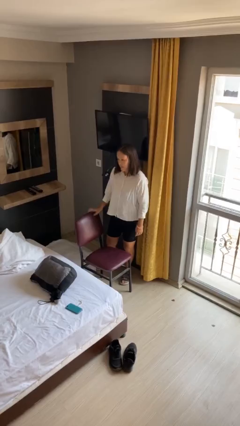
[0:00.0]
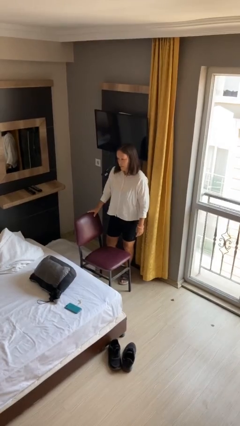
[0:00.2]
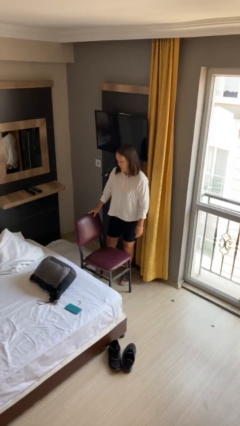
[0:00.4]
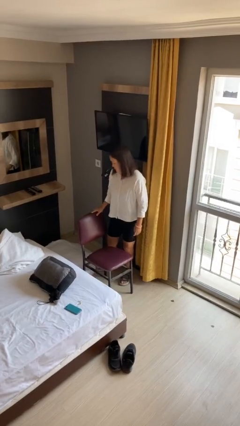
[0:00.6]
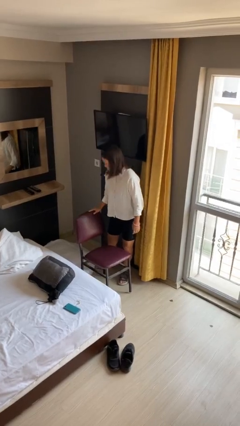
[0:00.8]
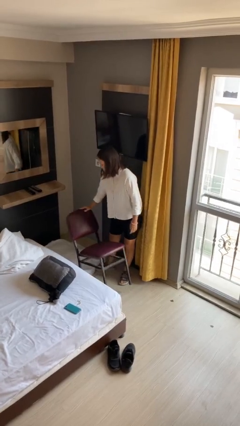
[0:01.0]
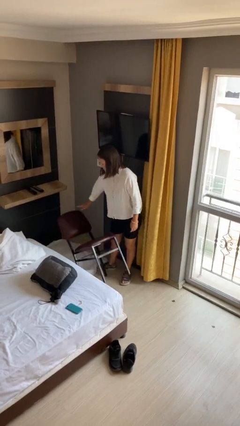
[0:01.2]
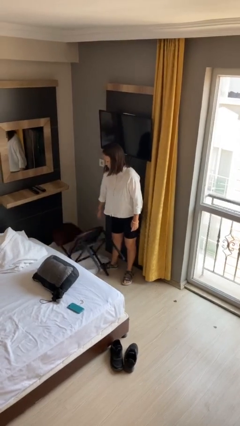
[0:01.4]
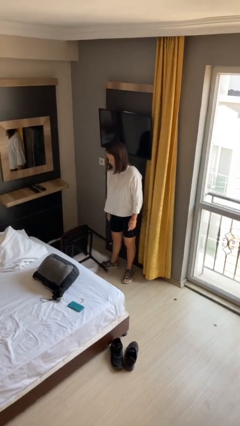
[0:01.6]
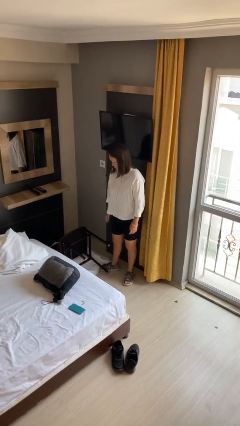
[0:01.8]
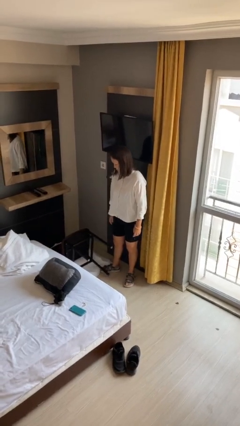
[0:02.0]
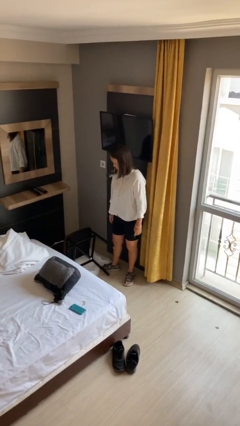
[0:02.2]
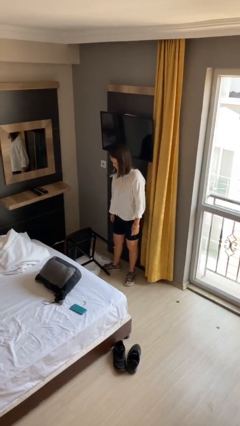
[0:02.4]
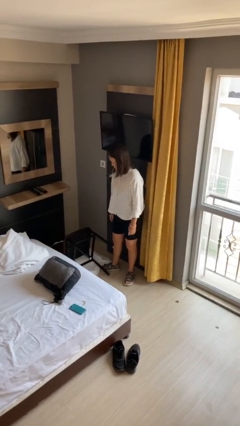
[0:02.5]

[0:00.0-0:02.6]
person knocks over furniture

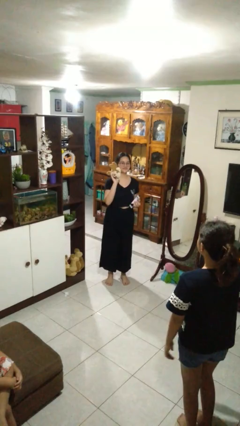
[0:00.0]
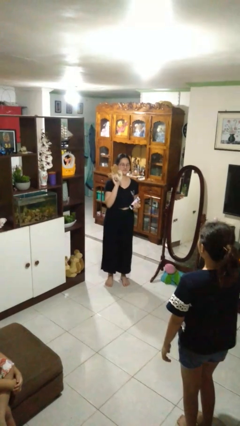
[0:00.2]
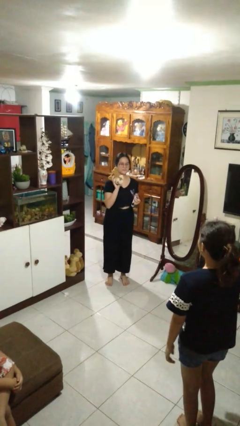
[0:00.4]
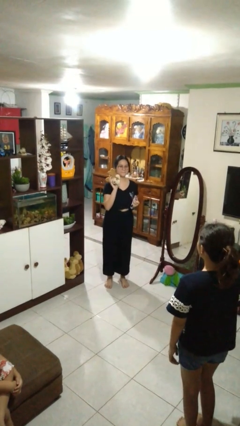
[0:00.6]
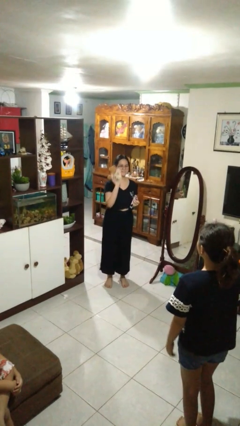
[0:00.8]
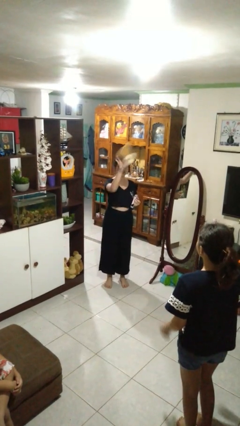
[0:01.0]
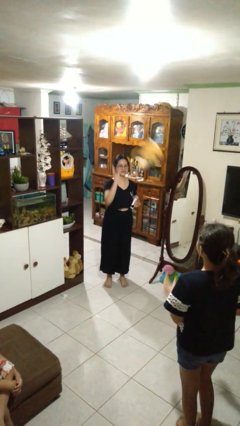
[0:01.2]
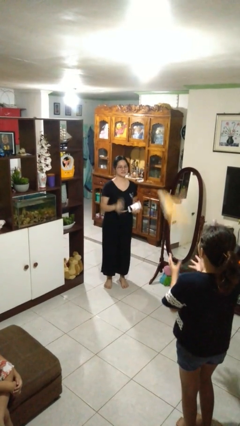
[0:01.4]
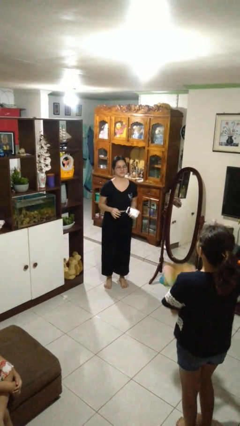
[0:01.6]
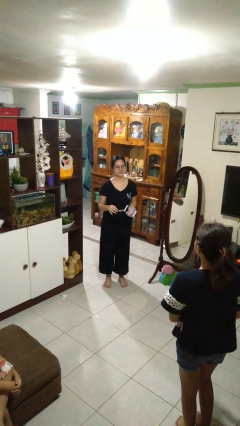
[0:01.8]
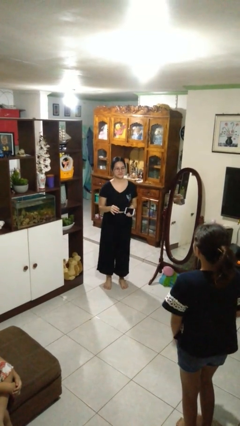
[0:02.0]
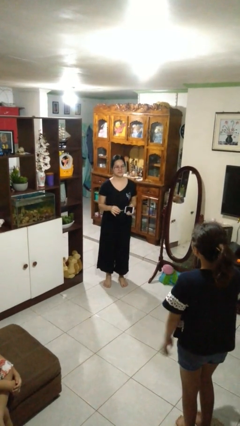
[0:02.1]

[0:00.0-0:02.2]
person throws object to person

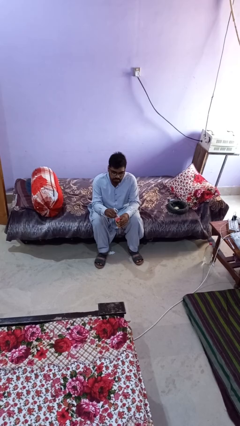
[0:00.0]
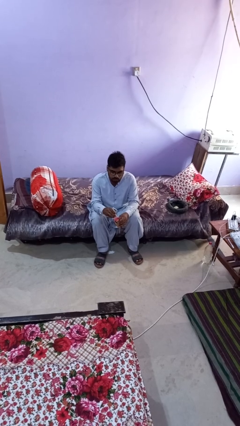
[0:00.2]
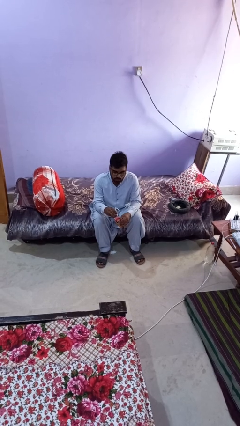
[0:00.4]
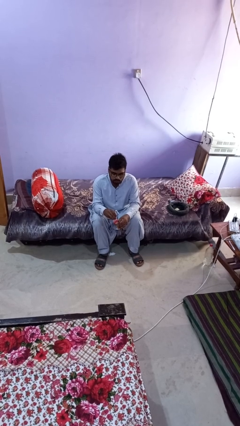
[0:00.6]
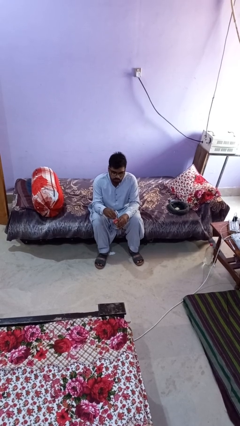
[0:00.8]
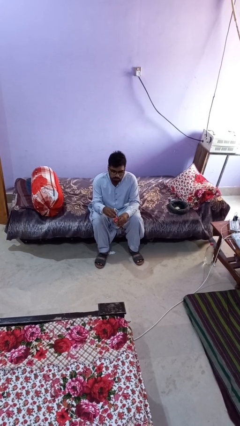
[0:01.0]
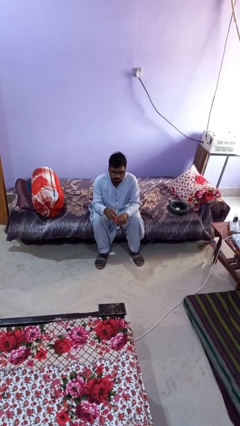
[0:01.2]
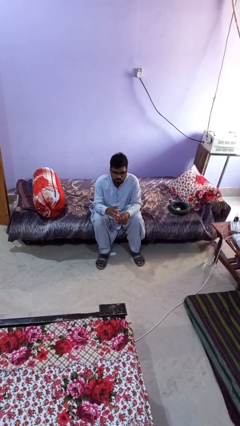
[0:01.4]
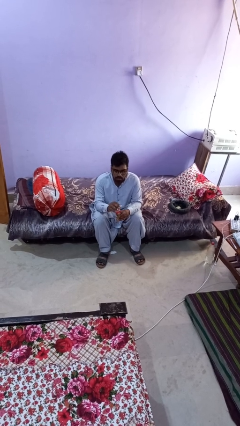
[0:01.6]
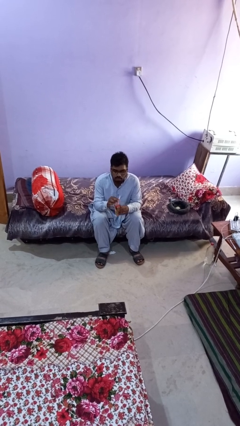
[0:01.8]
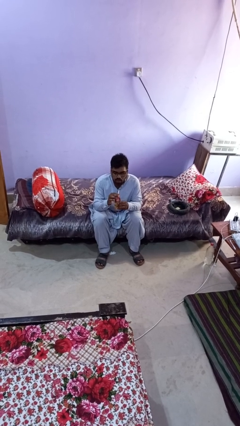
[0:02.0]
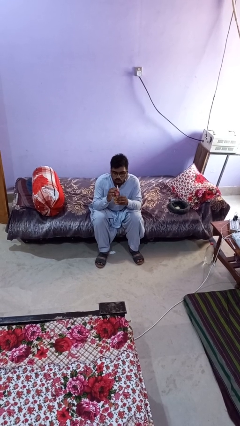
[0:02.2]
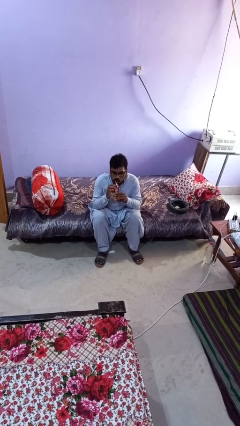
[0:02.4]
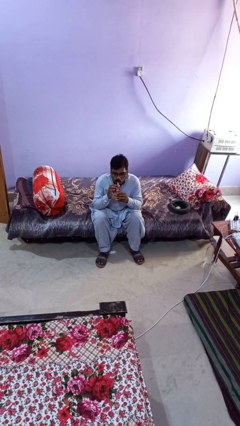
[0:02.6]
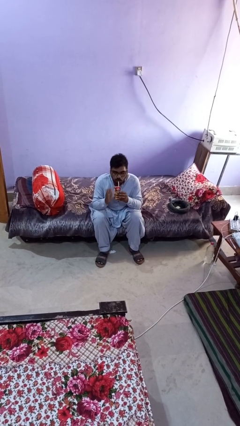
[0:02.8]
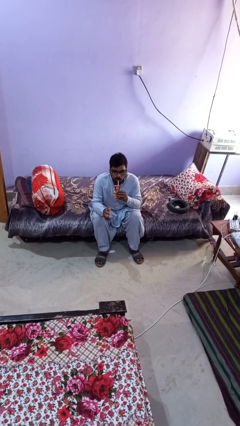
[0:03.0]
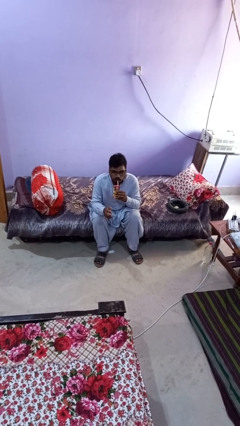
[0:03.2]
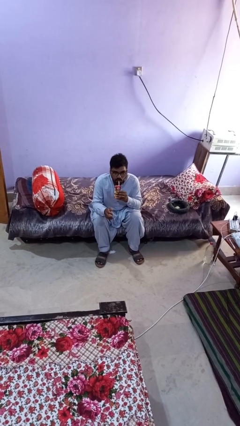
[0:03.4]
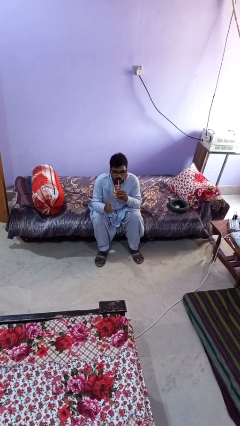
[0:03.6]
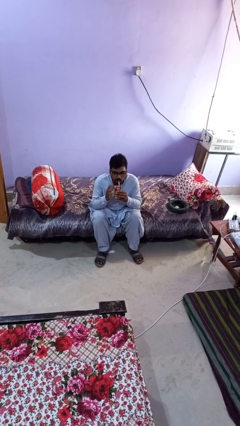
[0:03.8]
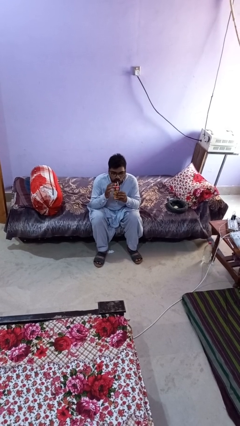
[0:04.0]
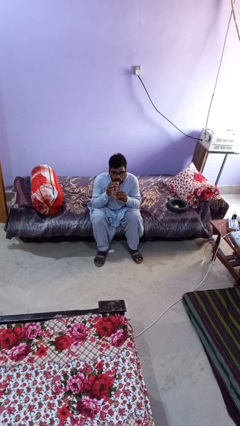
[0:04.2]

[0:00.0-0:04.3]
person drinks from straw

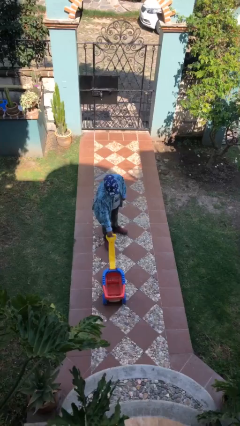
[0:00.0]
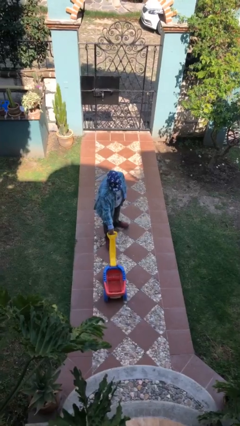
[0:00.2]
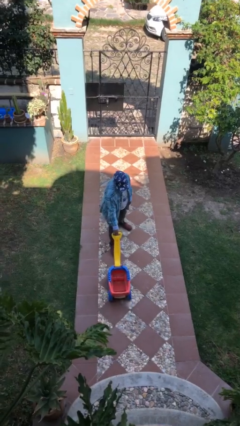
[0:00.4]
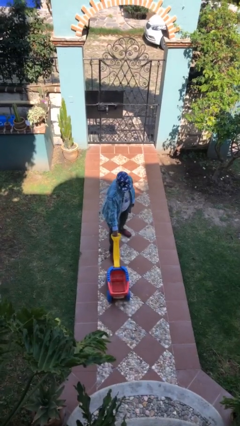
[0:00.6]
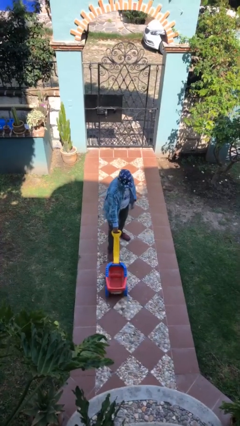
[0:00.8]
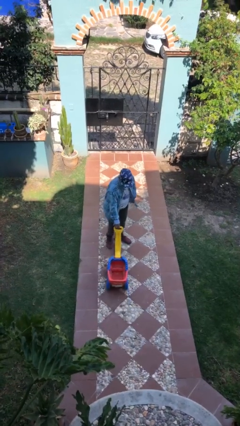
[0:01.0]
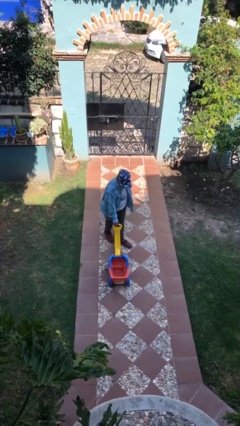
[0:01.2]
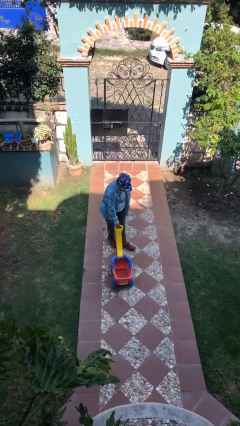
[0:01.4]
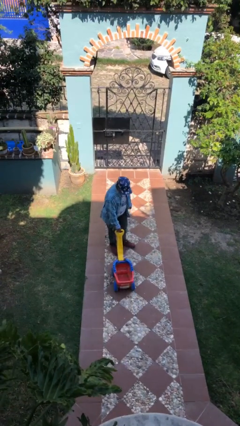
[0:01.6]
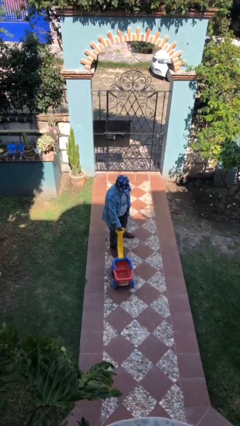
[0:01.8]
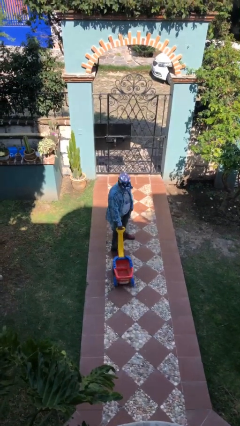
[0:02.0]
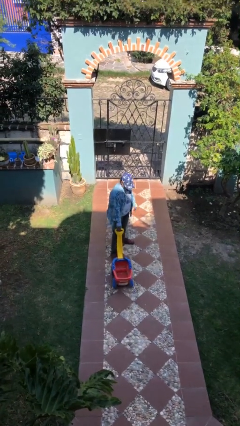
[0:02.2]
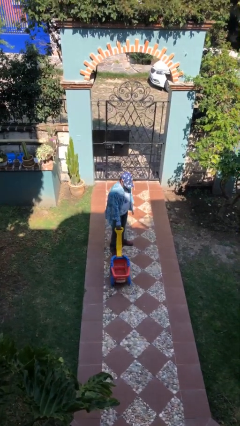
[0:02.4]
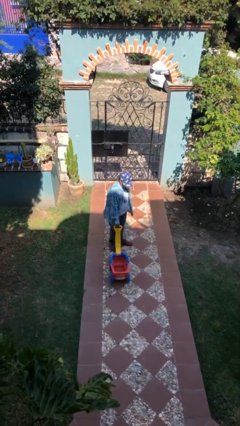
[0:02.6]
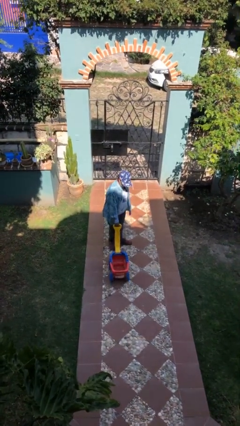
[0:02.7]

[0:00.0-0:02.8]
person pulls wheeled cart

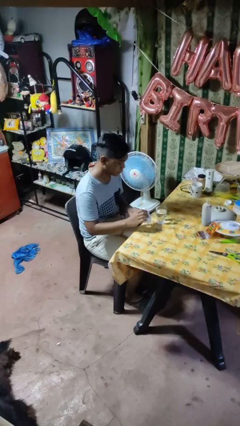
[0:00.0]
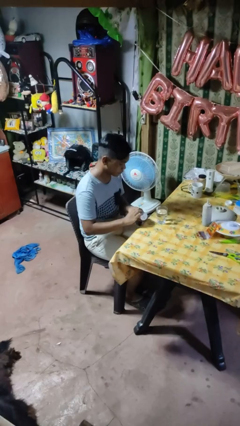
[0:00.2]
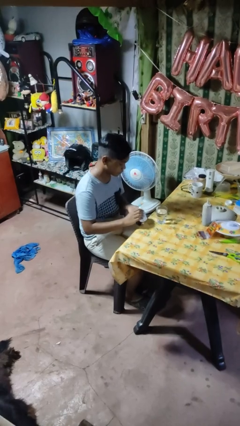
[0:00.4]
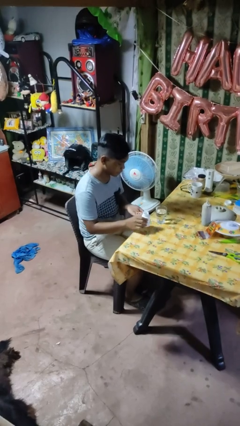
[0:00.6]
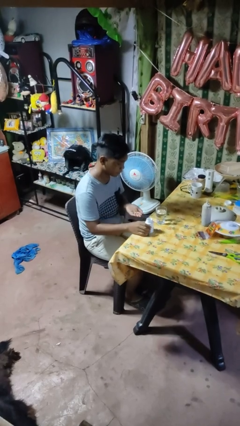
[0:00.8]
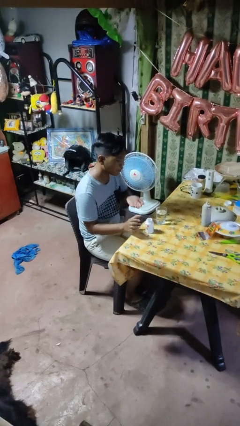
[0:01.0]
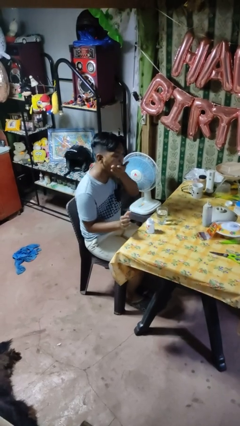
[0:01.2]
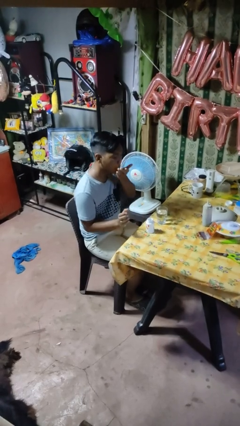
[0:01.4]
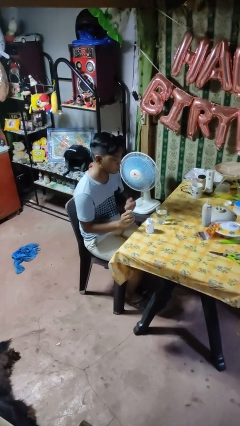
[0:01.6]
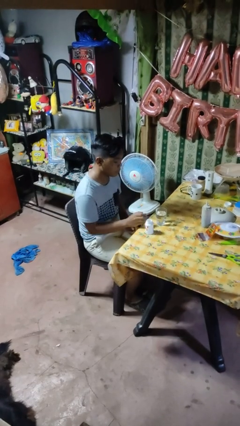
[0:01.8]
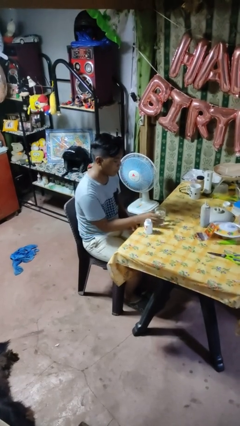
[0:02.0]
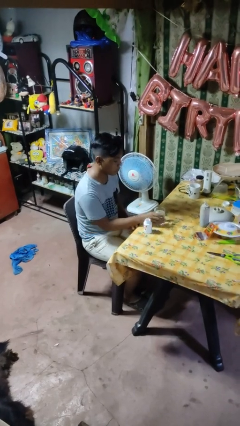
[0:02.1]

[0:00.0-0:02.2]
person takes medicine pills

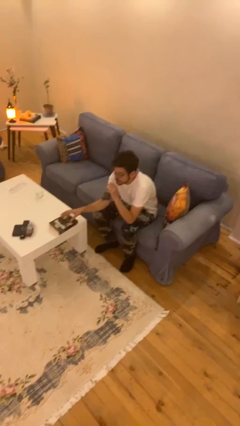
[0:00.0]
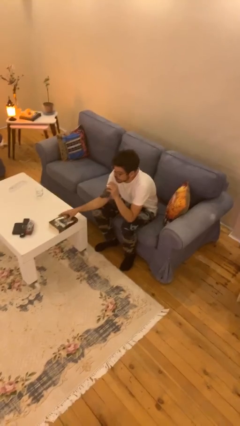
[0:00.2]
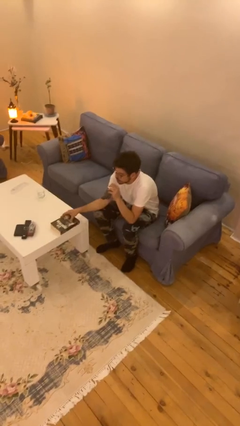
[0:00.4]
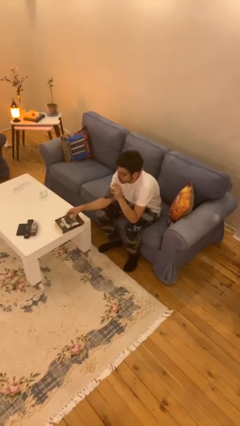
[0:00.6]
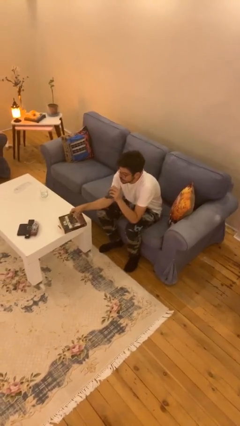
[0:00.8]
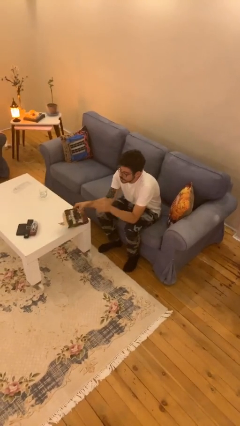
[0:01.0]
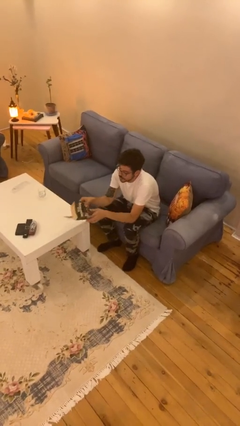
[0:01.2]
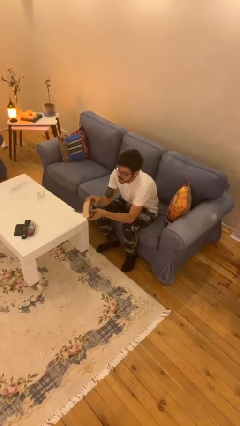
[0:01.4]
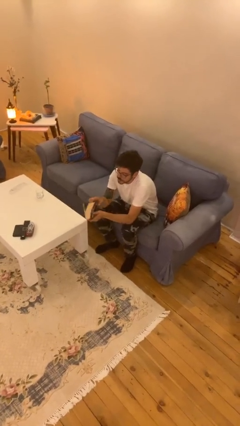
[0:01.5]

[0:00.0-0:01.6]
person picks up object from table

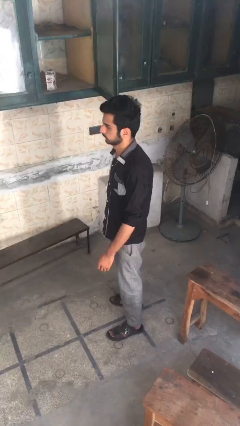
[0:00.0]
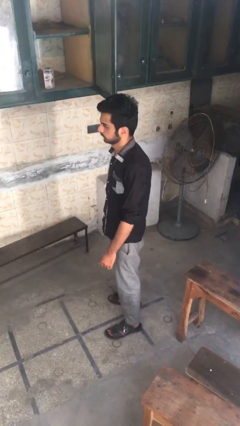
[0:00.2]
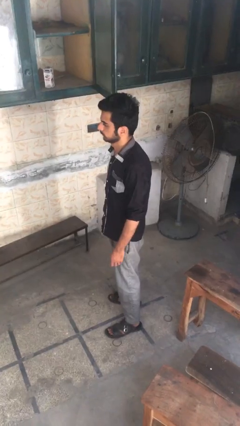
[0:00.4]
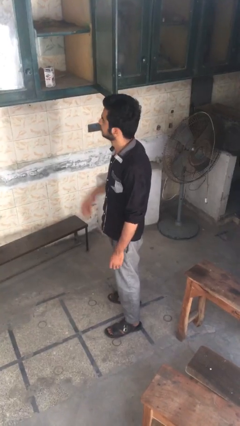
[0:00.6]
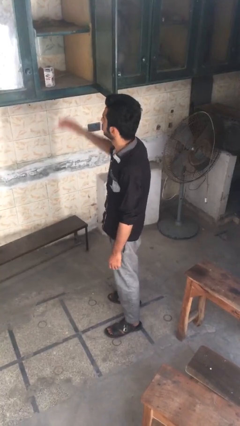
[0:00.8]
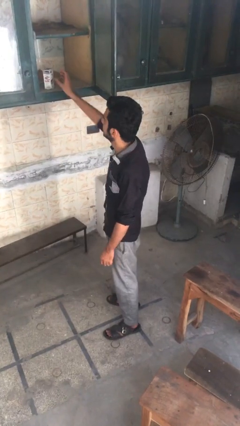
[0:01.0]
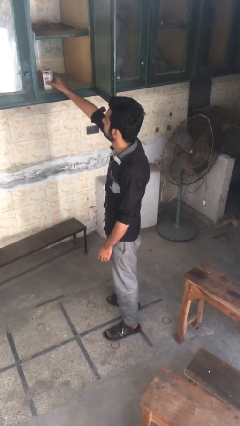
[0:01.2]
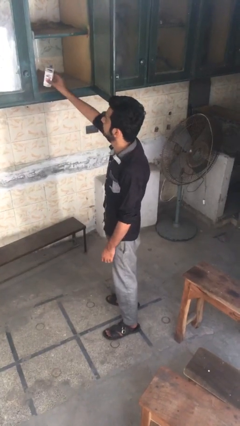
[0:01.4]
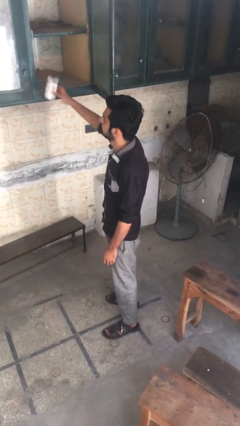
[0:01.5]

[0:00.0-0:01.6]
person takes object from cabinet
